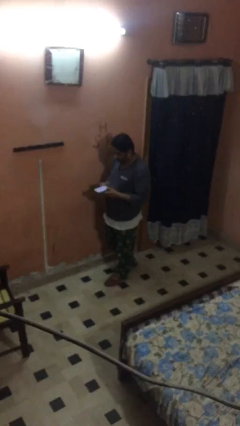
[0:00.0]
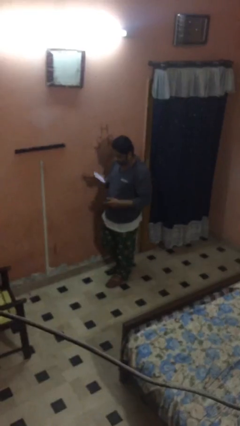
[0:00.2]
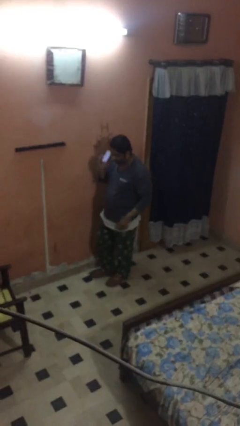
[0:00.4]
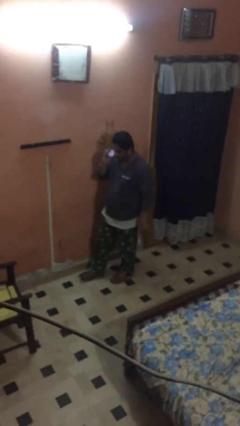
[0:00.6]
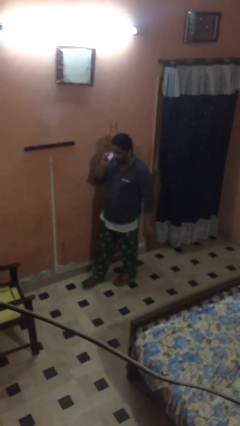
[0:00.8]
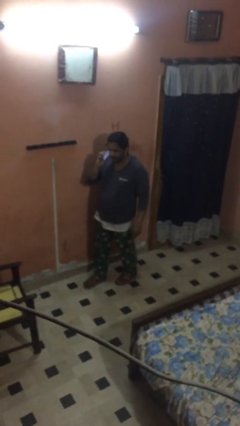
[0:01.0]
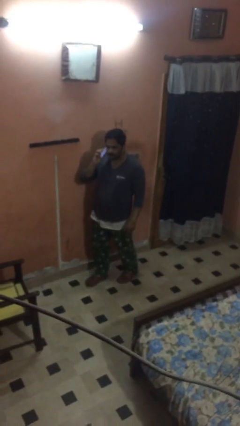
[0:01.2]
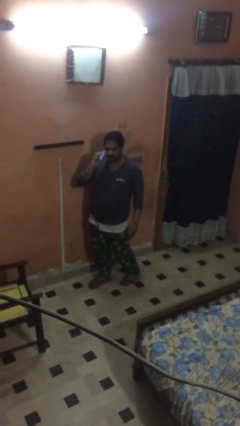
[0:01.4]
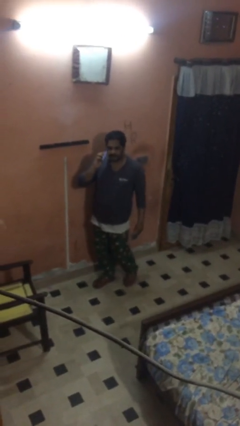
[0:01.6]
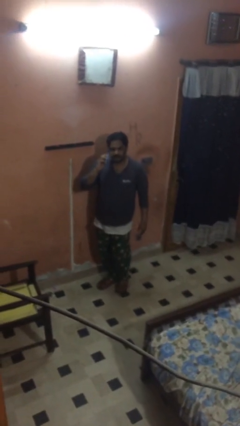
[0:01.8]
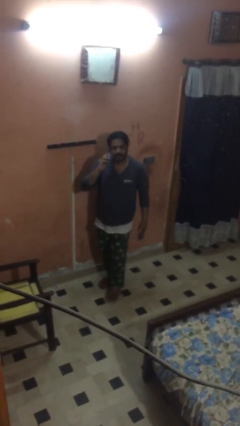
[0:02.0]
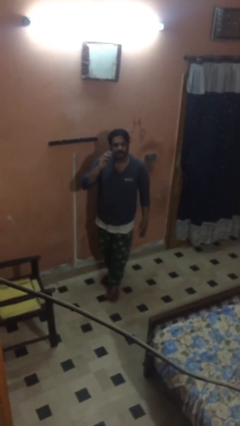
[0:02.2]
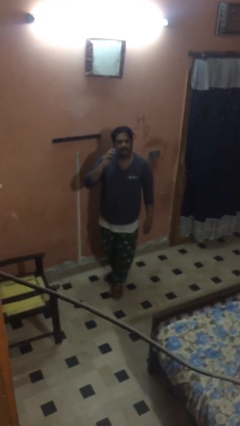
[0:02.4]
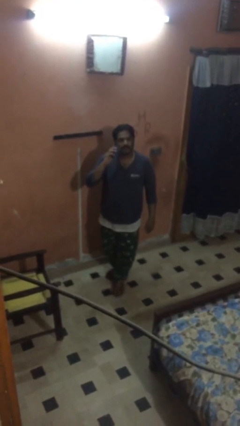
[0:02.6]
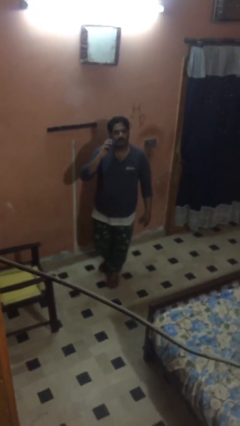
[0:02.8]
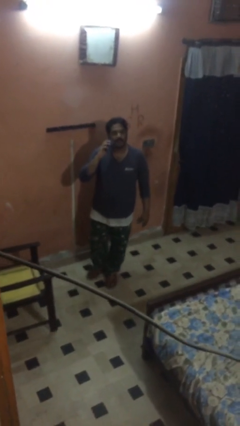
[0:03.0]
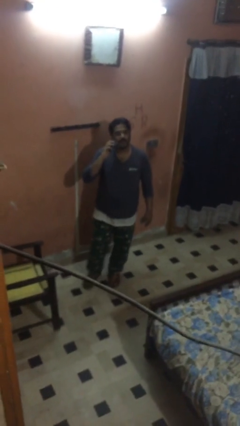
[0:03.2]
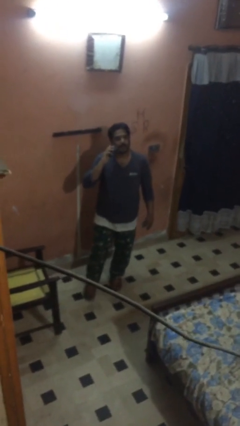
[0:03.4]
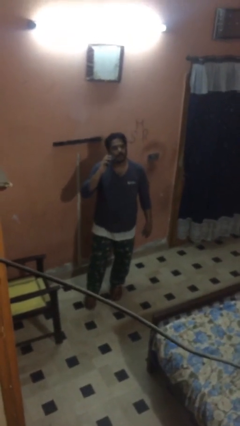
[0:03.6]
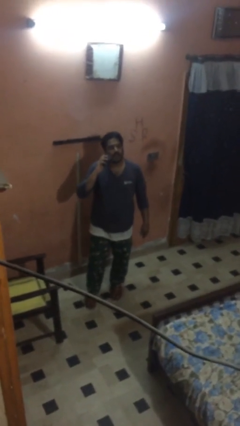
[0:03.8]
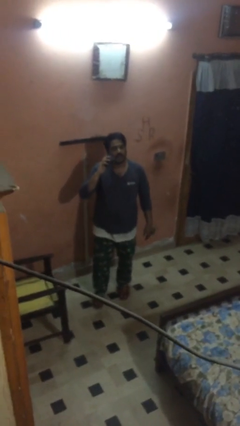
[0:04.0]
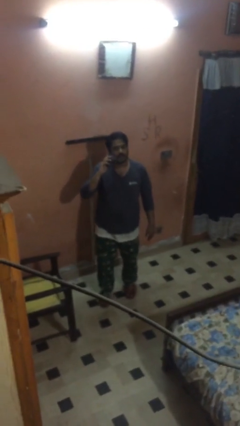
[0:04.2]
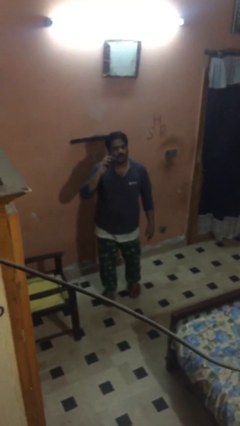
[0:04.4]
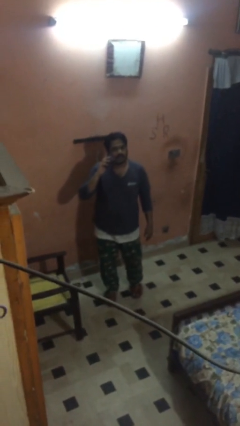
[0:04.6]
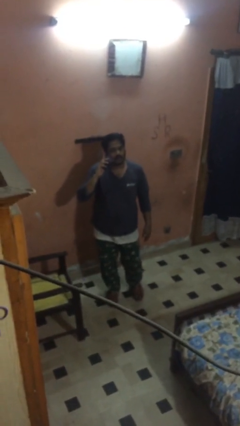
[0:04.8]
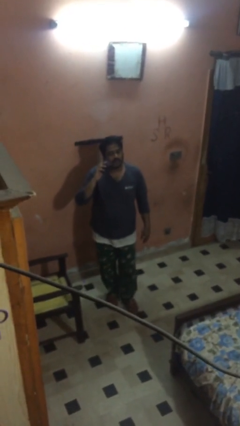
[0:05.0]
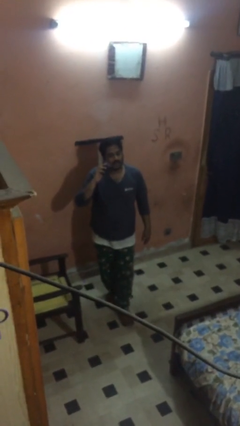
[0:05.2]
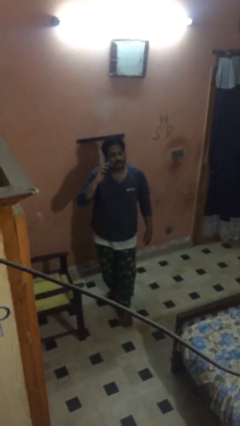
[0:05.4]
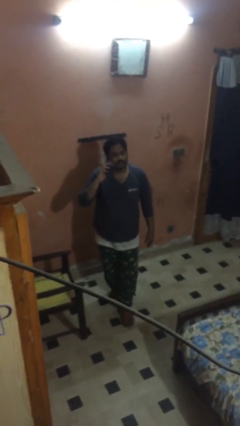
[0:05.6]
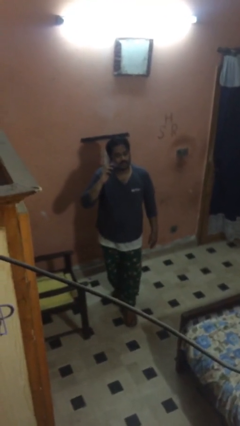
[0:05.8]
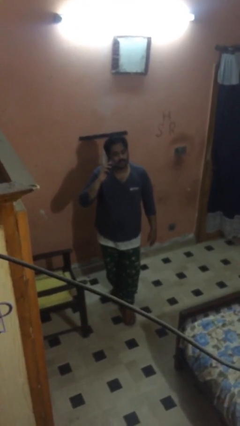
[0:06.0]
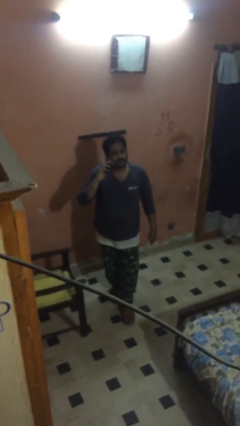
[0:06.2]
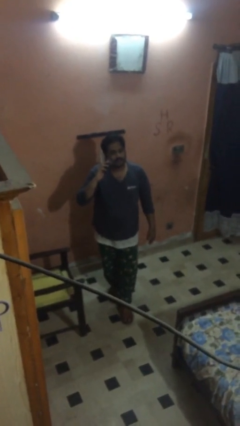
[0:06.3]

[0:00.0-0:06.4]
person talks on phone

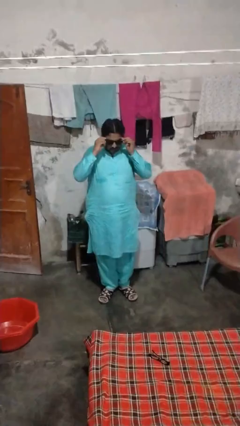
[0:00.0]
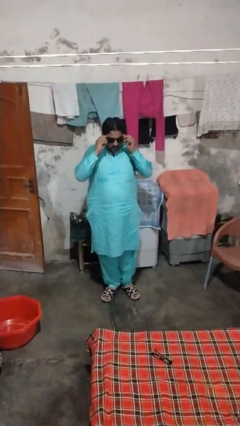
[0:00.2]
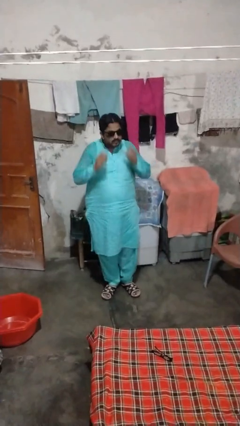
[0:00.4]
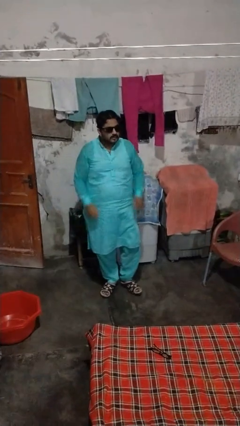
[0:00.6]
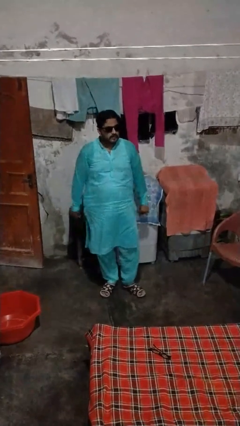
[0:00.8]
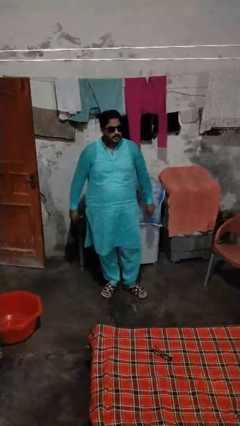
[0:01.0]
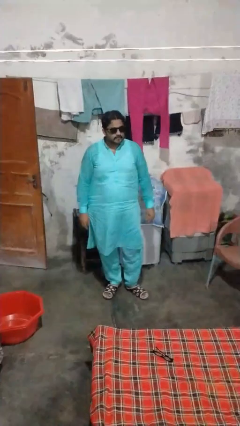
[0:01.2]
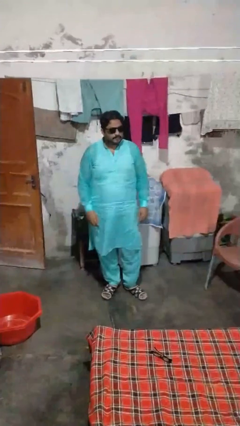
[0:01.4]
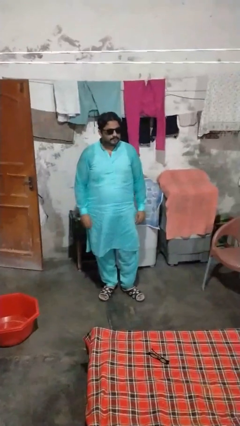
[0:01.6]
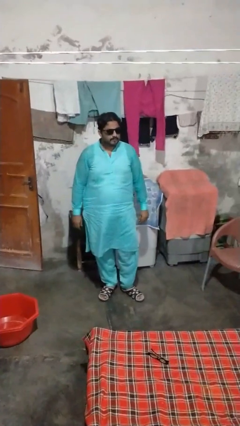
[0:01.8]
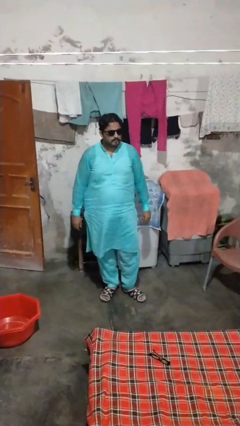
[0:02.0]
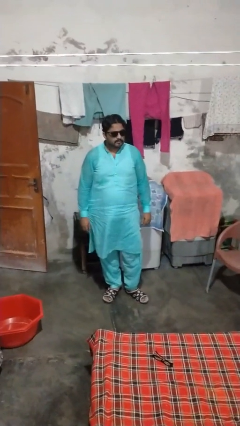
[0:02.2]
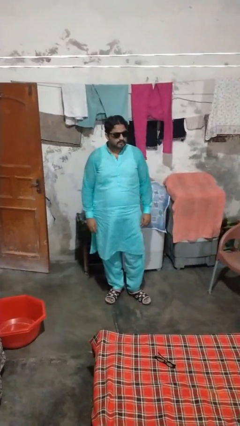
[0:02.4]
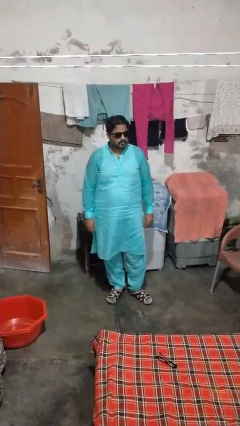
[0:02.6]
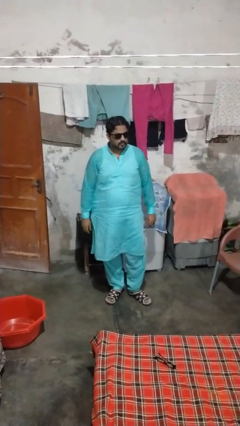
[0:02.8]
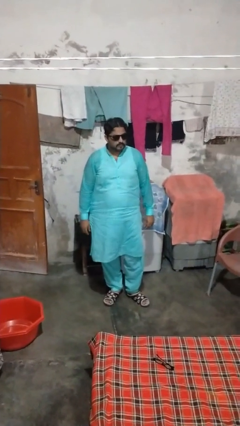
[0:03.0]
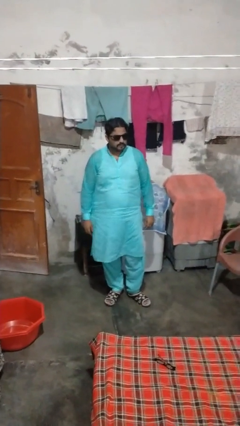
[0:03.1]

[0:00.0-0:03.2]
person puts on sunglasses

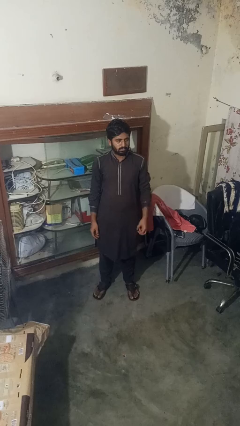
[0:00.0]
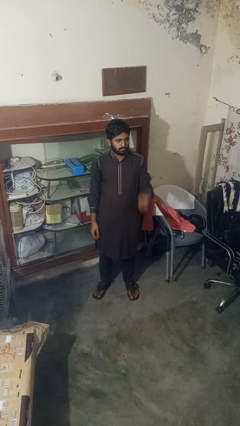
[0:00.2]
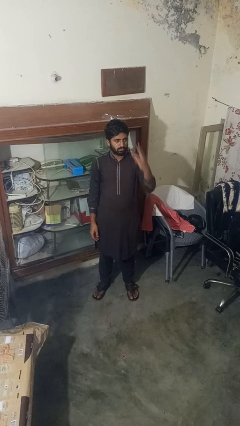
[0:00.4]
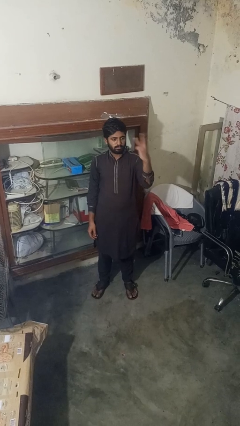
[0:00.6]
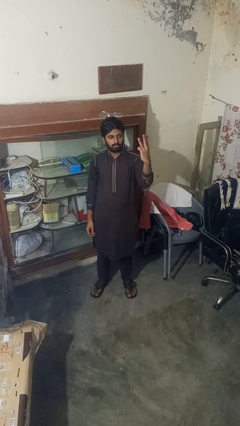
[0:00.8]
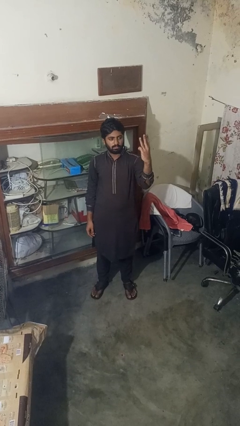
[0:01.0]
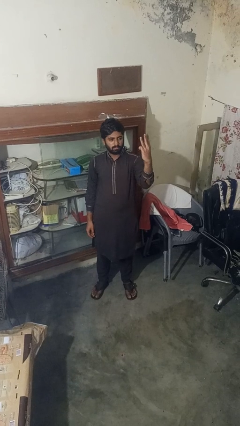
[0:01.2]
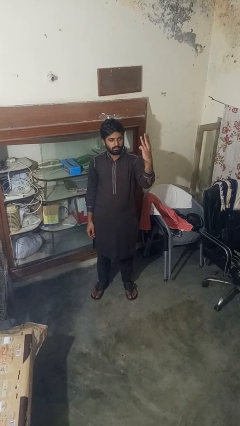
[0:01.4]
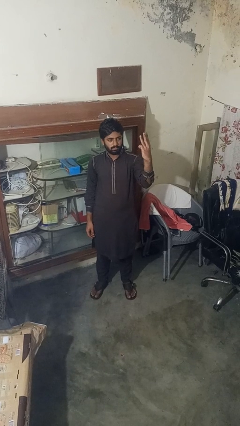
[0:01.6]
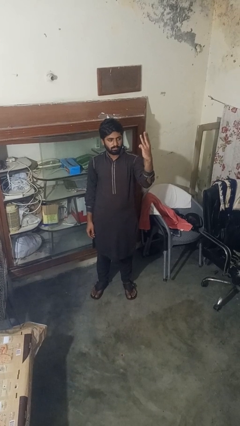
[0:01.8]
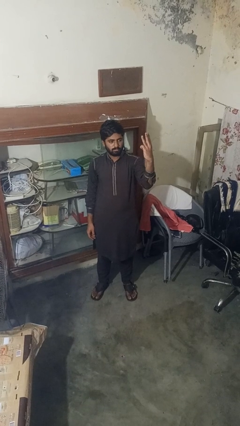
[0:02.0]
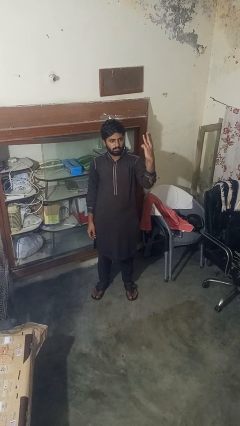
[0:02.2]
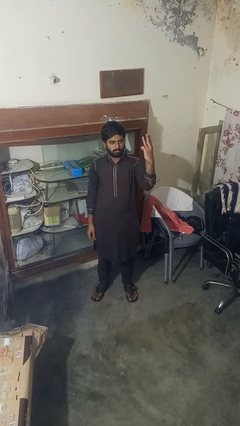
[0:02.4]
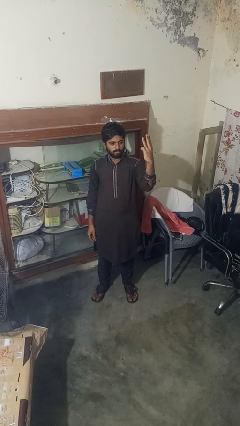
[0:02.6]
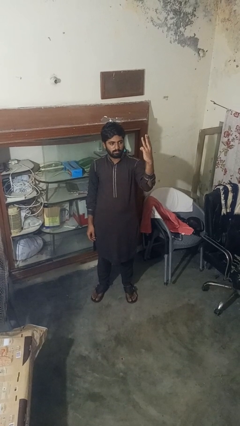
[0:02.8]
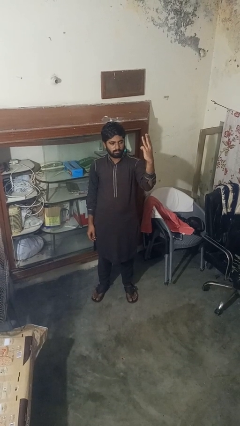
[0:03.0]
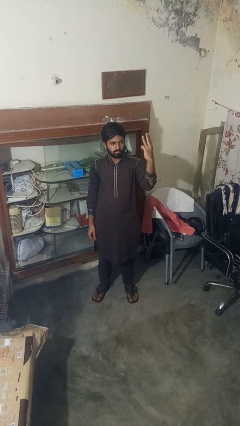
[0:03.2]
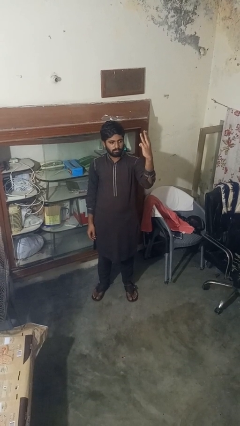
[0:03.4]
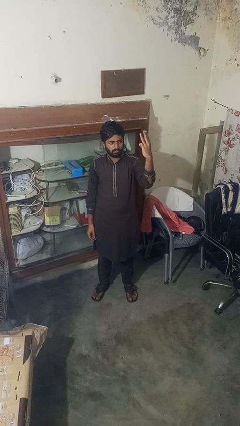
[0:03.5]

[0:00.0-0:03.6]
person gestures number three

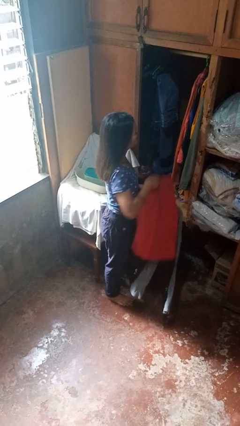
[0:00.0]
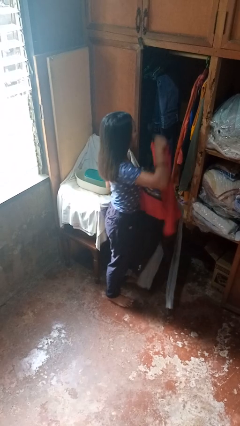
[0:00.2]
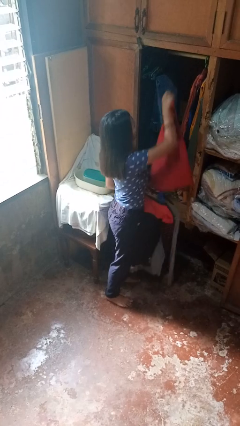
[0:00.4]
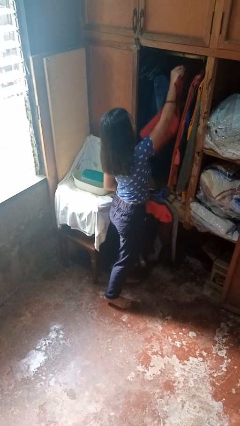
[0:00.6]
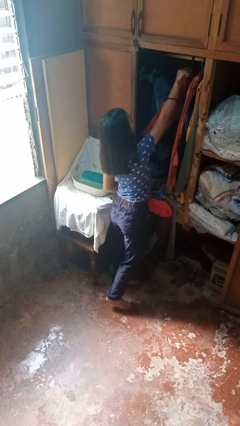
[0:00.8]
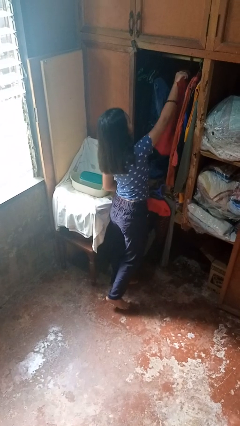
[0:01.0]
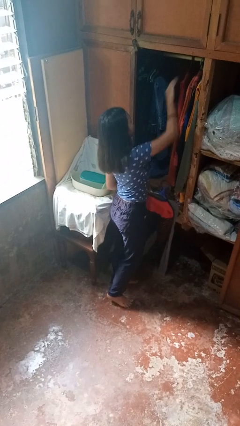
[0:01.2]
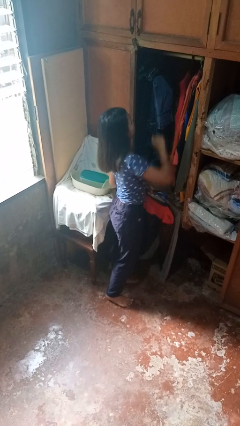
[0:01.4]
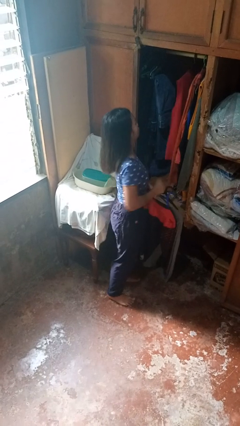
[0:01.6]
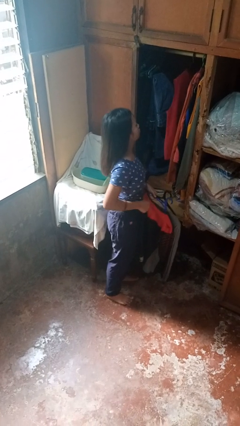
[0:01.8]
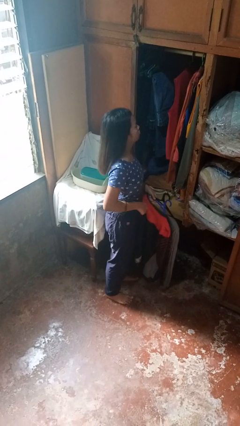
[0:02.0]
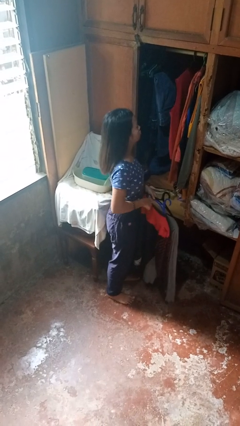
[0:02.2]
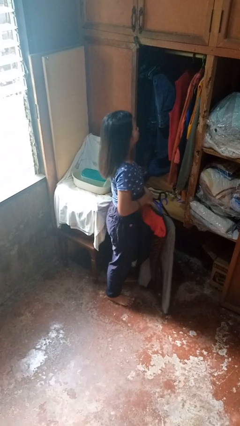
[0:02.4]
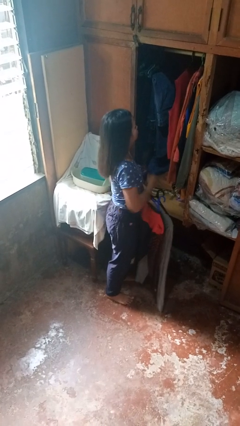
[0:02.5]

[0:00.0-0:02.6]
person puts clothes into closet

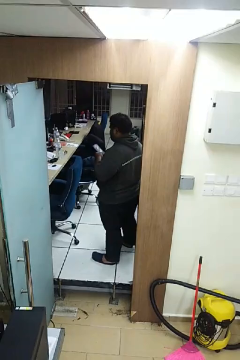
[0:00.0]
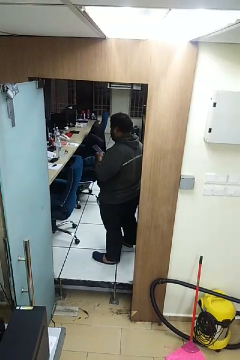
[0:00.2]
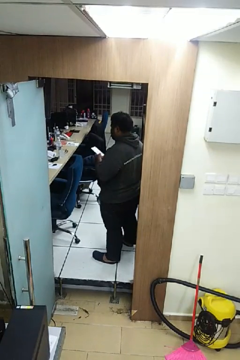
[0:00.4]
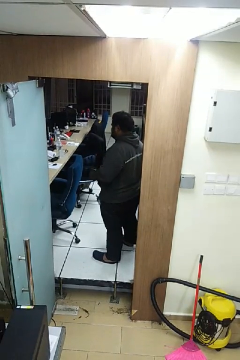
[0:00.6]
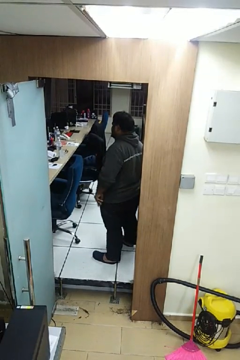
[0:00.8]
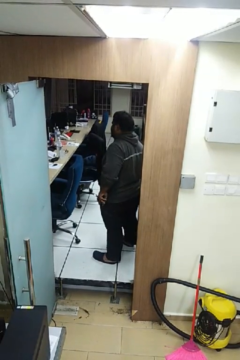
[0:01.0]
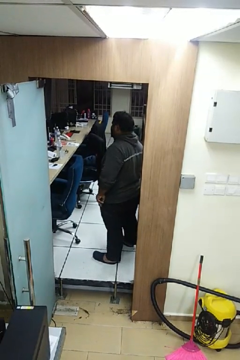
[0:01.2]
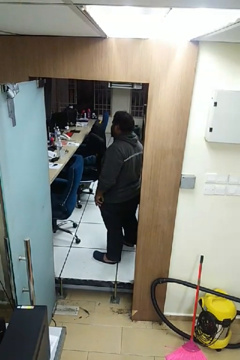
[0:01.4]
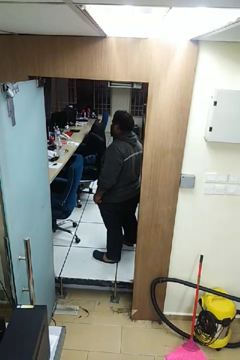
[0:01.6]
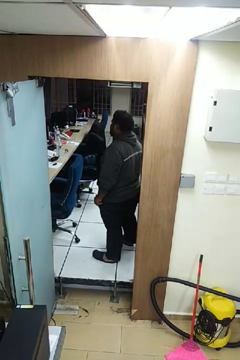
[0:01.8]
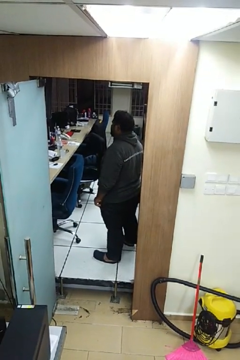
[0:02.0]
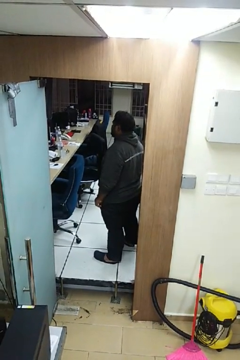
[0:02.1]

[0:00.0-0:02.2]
person puts phone into pocket
